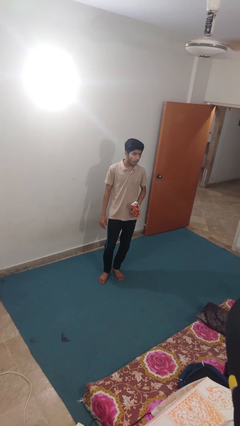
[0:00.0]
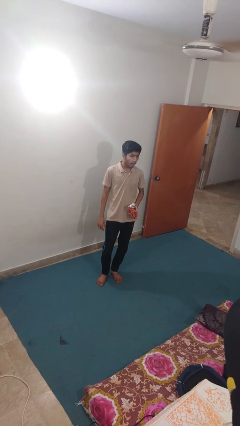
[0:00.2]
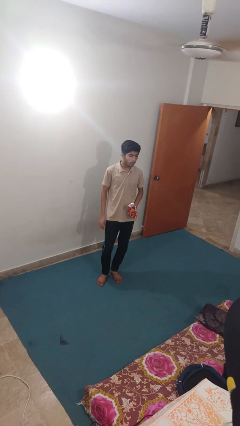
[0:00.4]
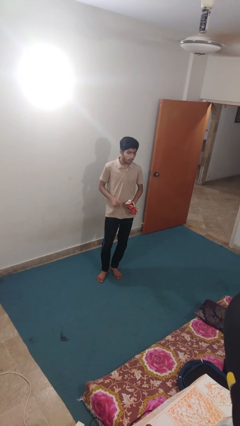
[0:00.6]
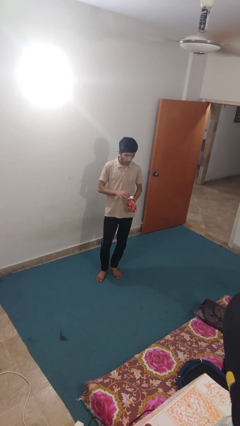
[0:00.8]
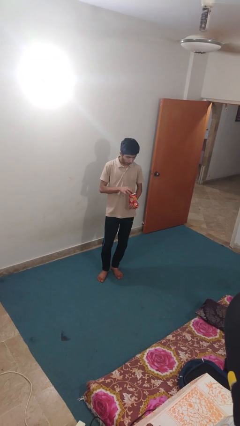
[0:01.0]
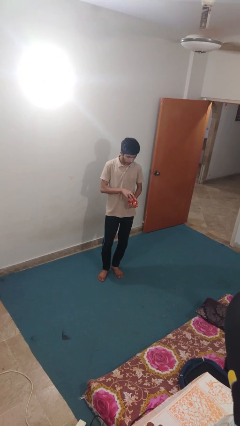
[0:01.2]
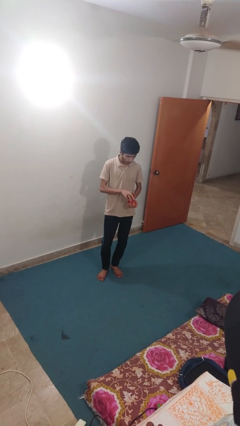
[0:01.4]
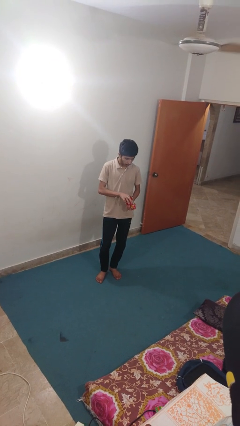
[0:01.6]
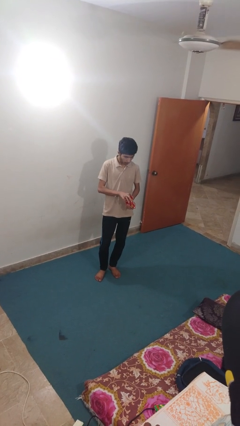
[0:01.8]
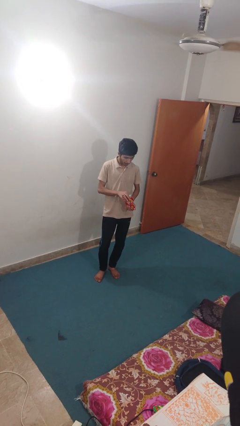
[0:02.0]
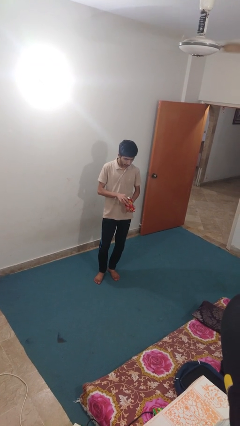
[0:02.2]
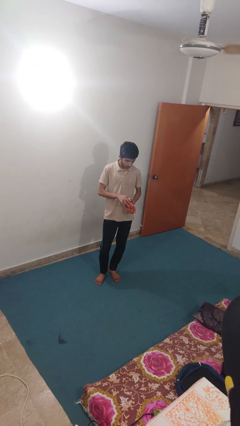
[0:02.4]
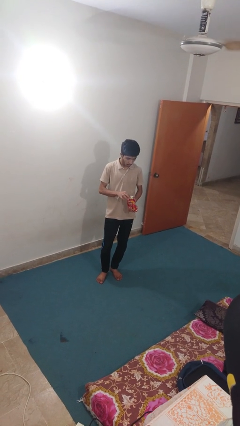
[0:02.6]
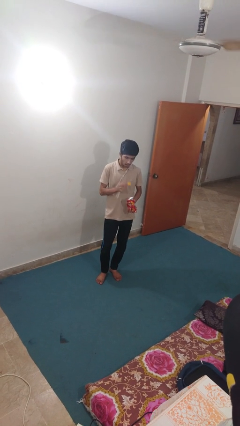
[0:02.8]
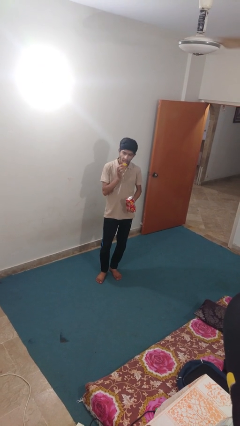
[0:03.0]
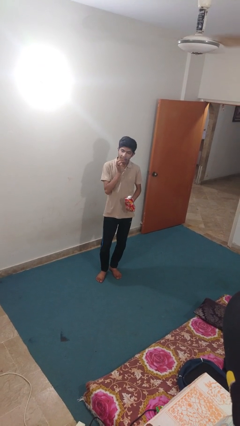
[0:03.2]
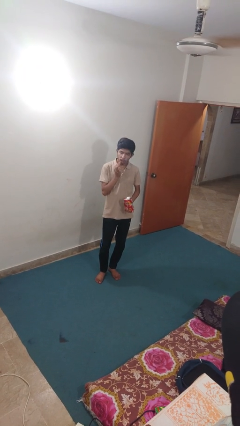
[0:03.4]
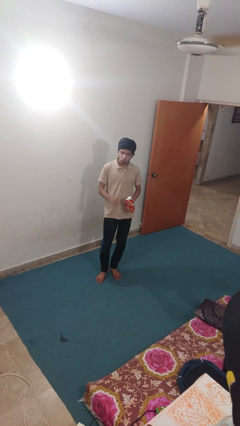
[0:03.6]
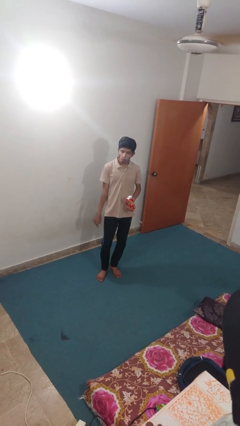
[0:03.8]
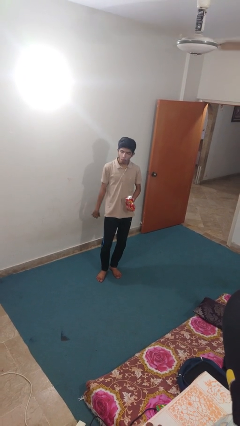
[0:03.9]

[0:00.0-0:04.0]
person eats snack from bag

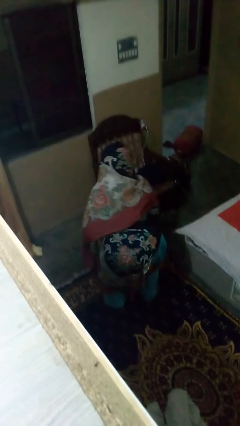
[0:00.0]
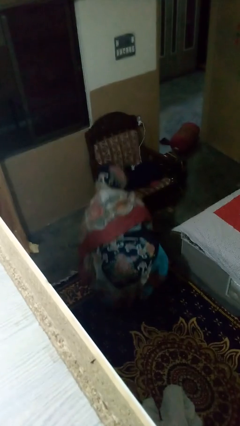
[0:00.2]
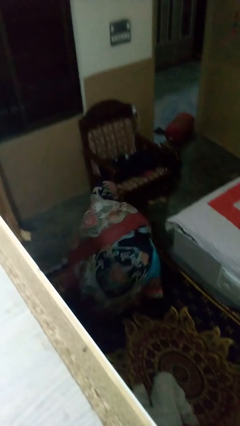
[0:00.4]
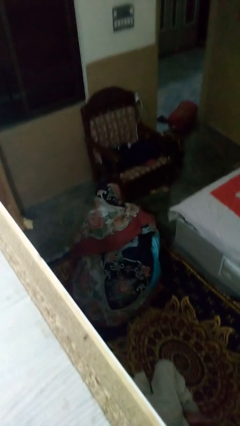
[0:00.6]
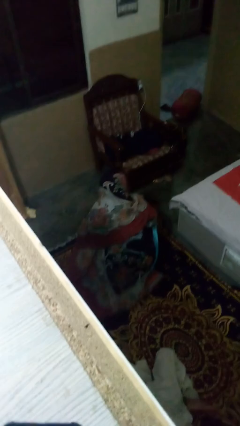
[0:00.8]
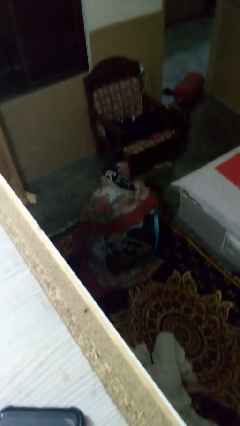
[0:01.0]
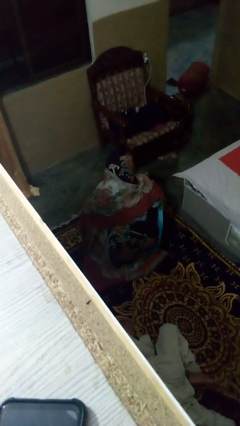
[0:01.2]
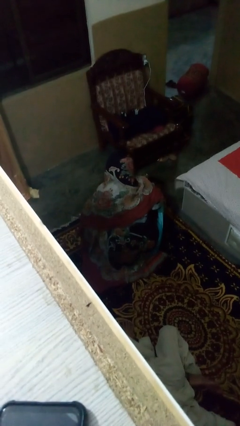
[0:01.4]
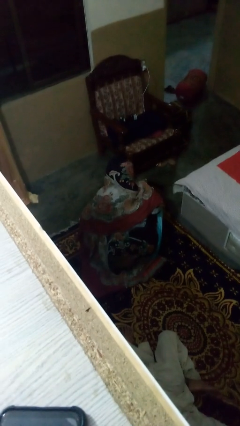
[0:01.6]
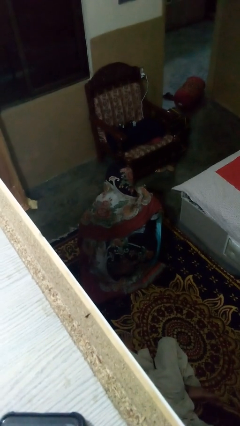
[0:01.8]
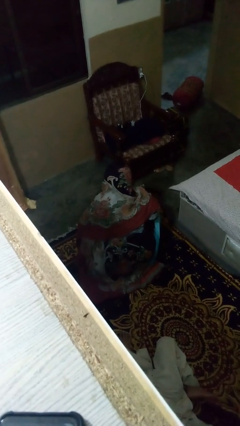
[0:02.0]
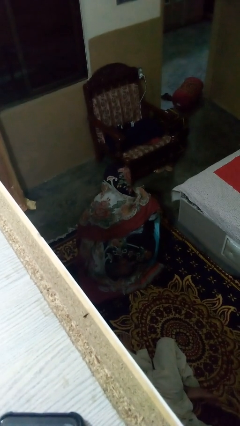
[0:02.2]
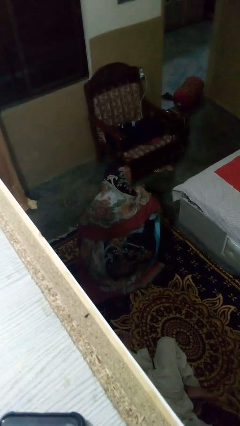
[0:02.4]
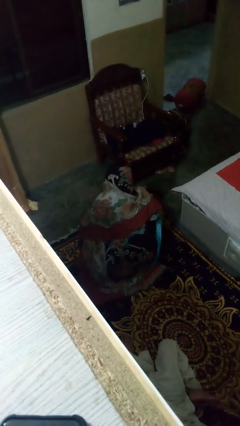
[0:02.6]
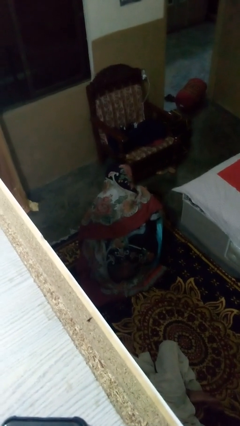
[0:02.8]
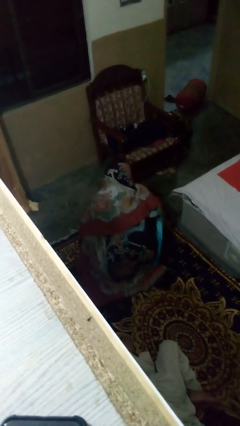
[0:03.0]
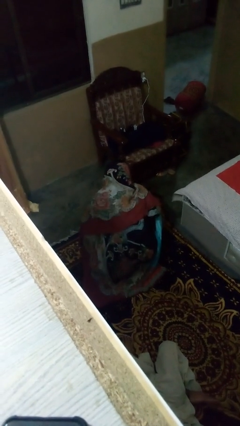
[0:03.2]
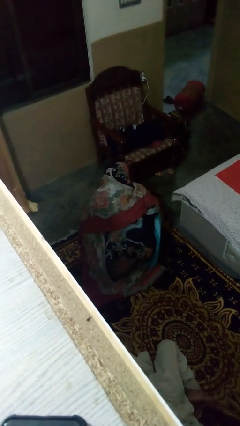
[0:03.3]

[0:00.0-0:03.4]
person squats

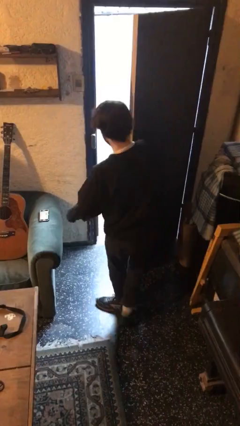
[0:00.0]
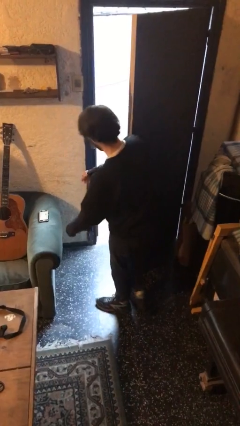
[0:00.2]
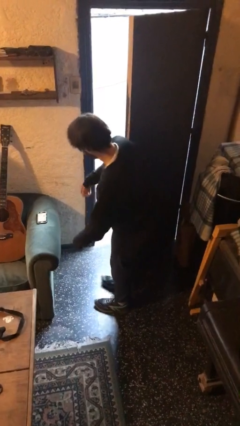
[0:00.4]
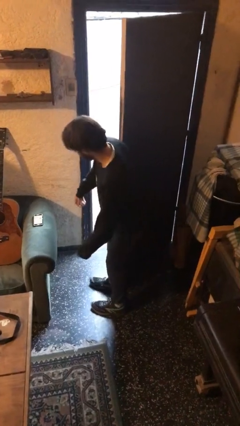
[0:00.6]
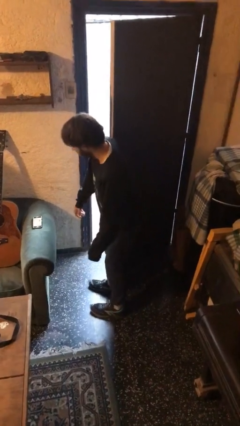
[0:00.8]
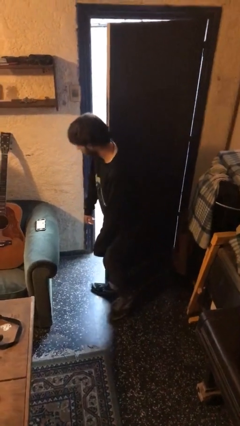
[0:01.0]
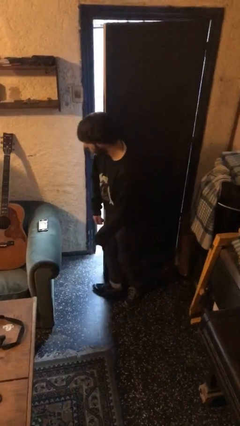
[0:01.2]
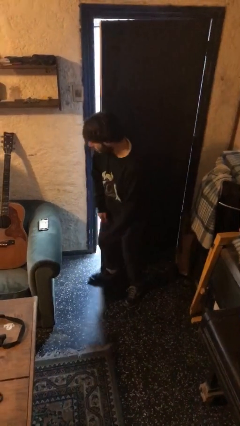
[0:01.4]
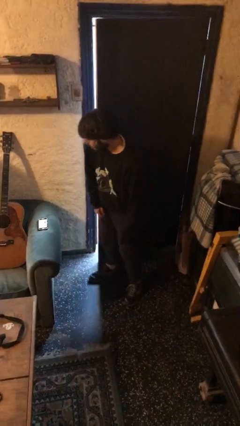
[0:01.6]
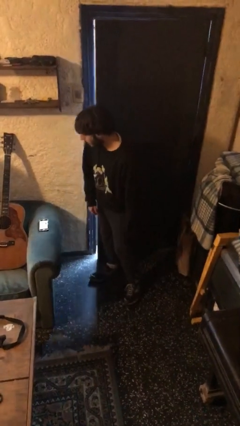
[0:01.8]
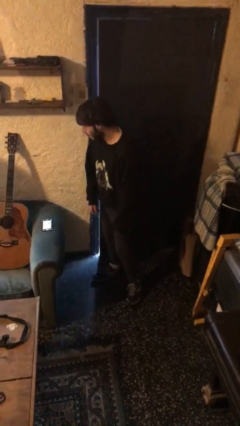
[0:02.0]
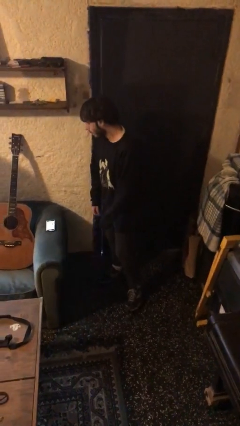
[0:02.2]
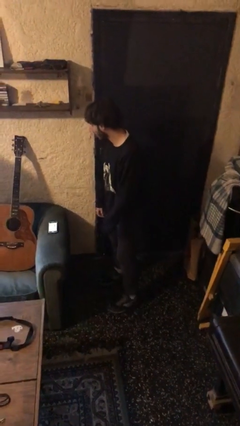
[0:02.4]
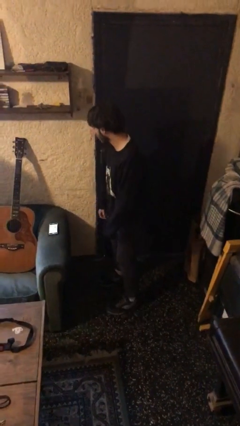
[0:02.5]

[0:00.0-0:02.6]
person closes door with hip

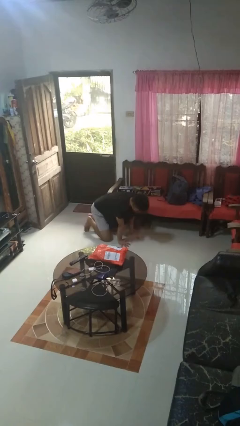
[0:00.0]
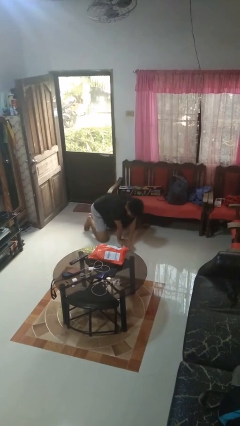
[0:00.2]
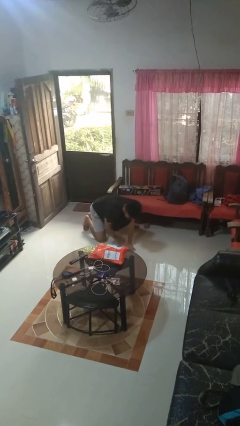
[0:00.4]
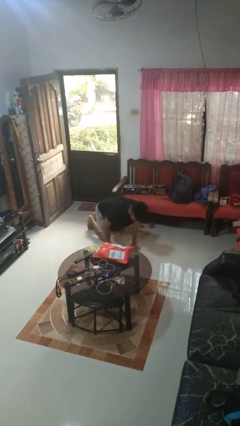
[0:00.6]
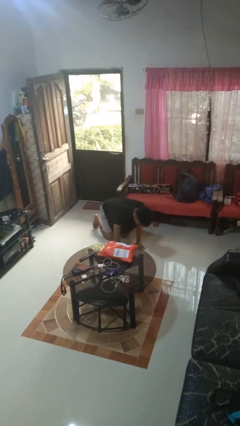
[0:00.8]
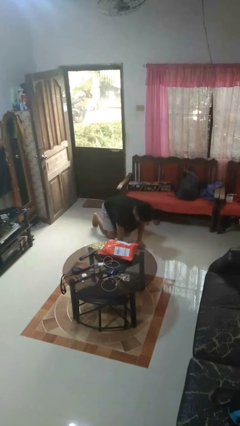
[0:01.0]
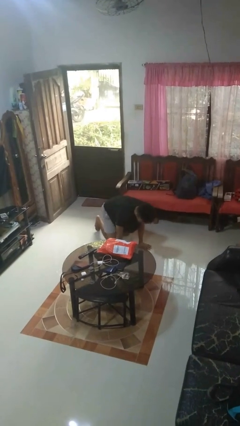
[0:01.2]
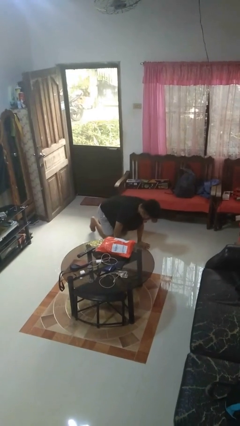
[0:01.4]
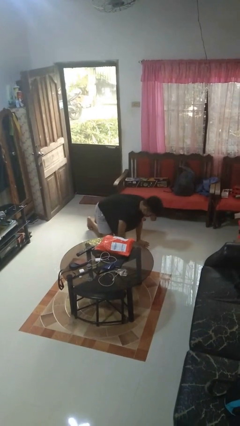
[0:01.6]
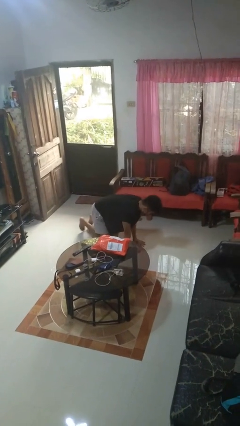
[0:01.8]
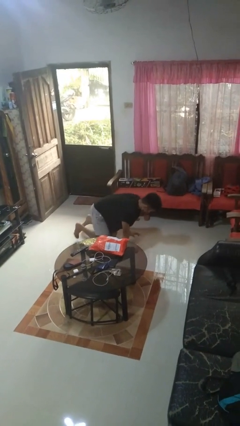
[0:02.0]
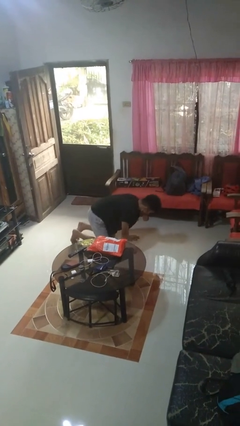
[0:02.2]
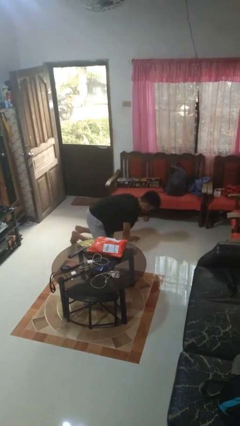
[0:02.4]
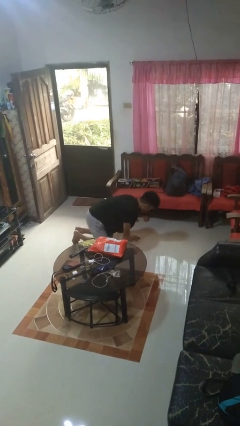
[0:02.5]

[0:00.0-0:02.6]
person crawls

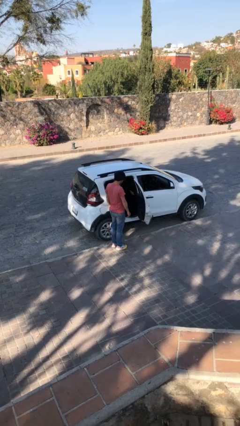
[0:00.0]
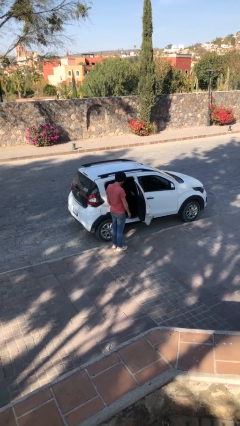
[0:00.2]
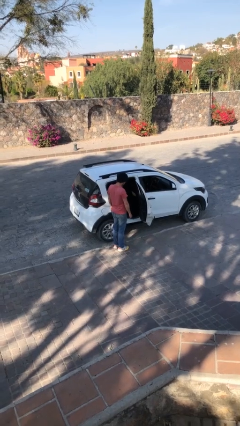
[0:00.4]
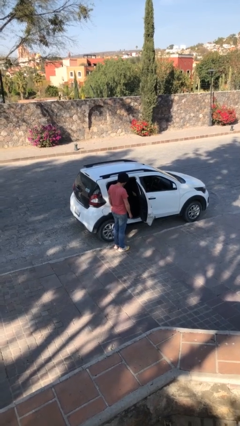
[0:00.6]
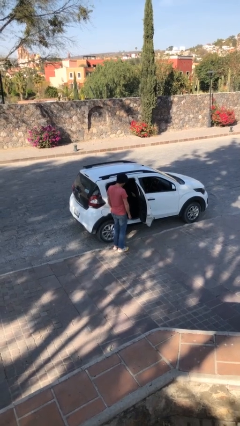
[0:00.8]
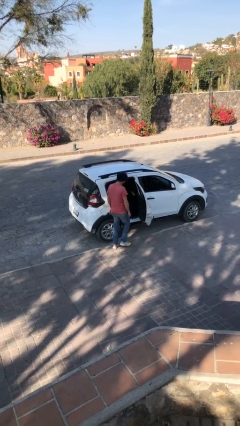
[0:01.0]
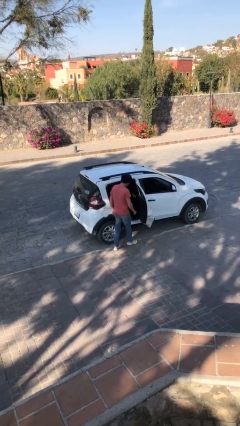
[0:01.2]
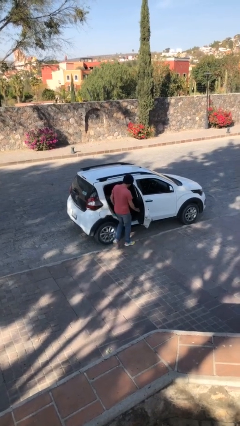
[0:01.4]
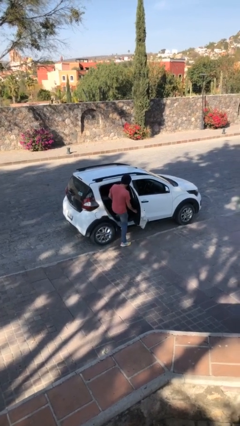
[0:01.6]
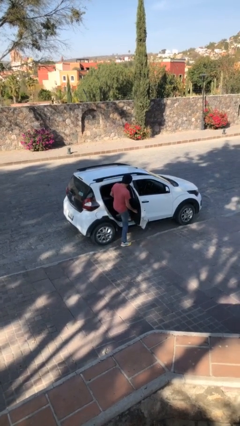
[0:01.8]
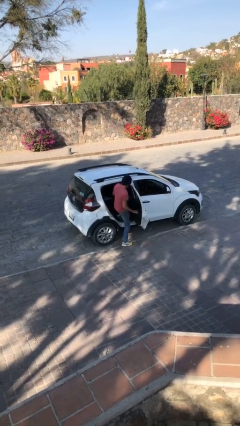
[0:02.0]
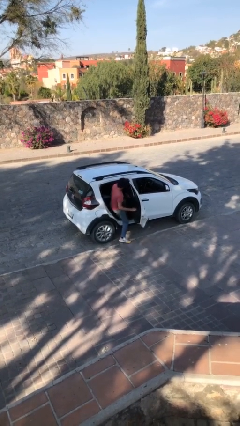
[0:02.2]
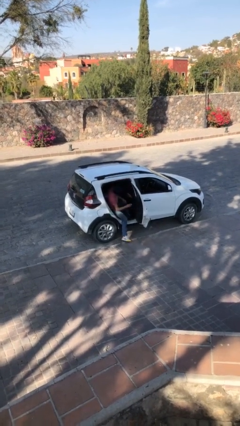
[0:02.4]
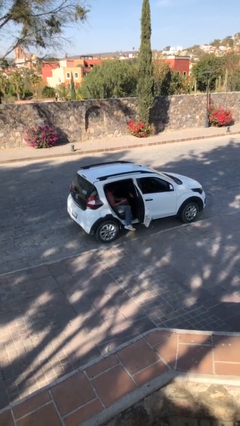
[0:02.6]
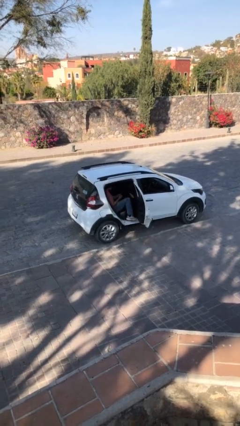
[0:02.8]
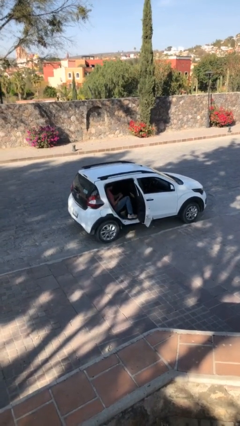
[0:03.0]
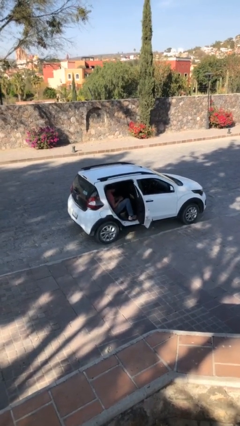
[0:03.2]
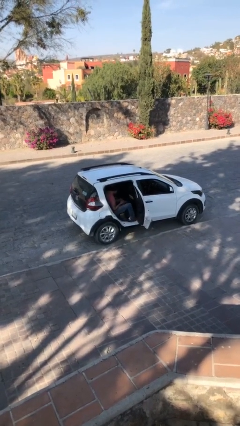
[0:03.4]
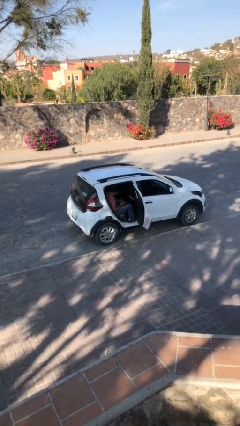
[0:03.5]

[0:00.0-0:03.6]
person enters car

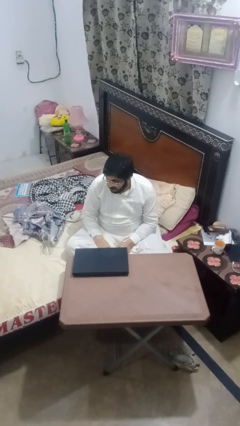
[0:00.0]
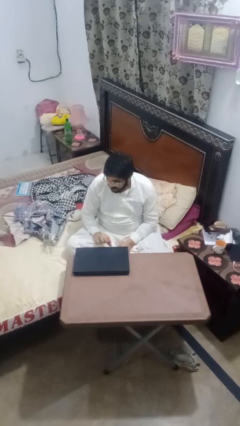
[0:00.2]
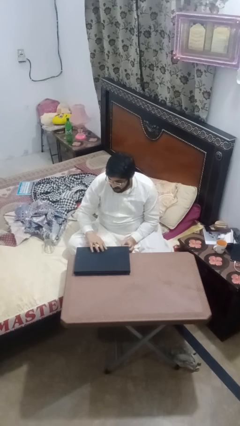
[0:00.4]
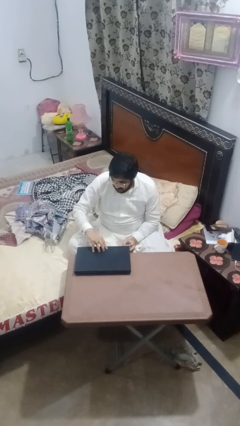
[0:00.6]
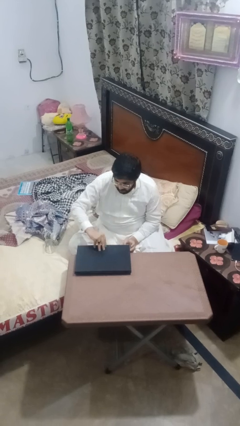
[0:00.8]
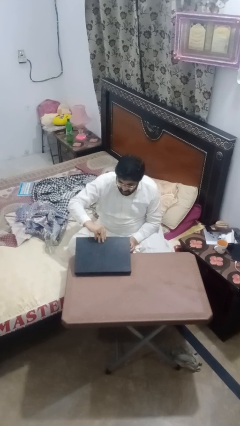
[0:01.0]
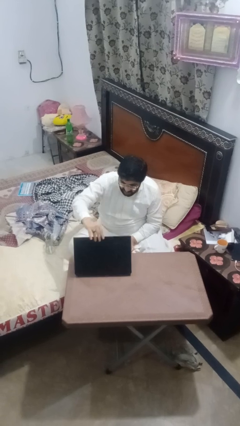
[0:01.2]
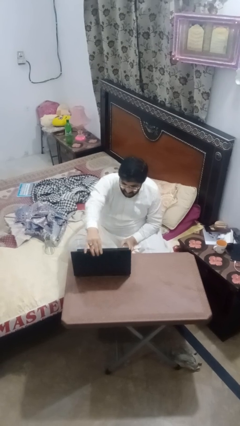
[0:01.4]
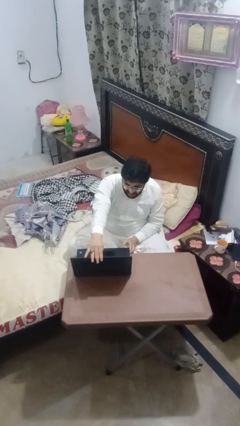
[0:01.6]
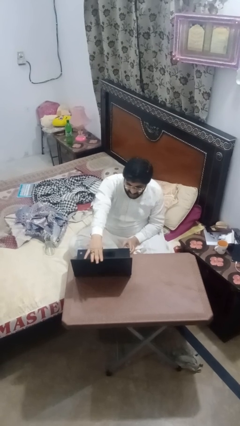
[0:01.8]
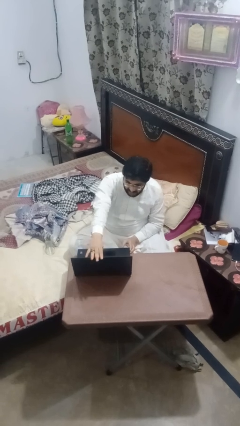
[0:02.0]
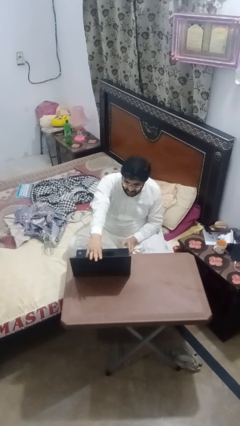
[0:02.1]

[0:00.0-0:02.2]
person opens laptop
